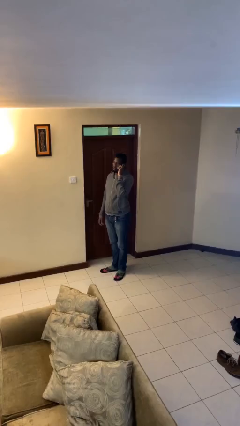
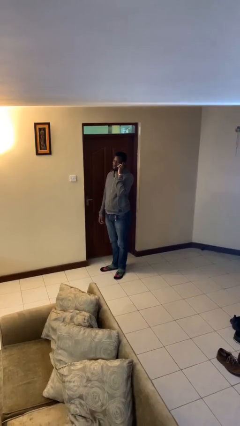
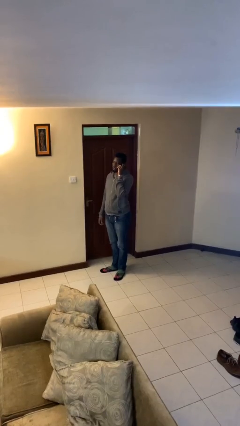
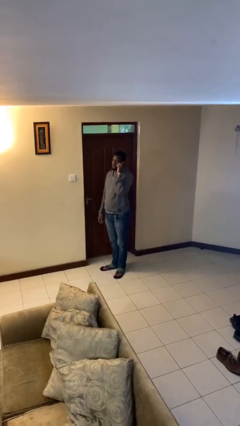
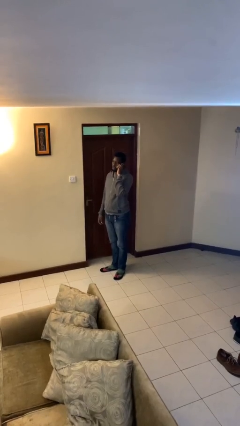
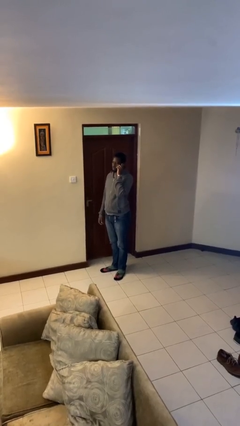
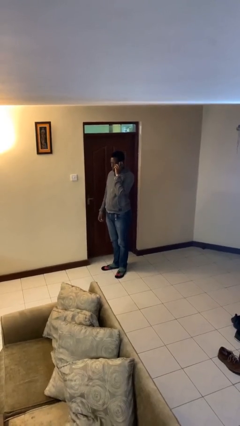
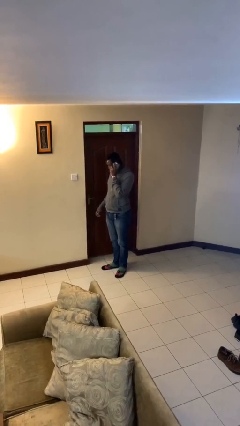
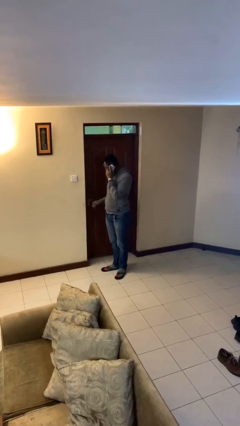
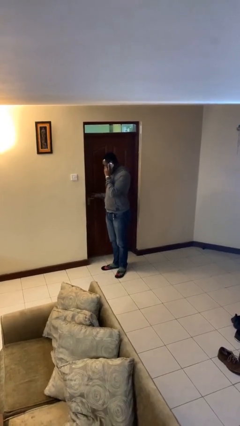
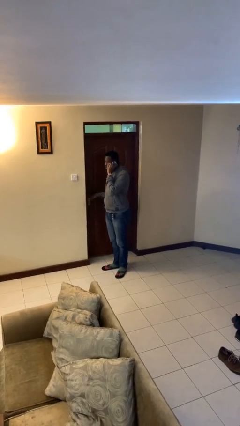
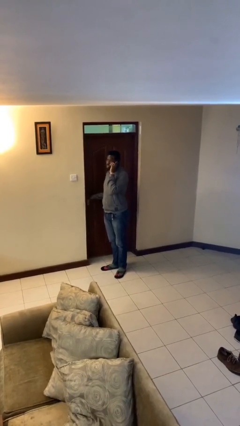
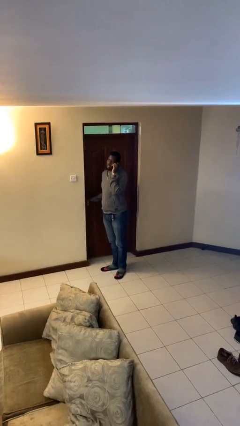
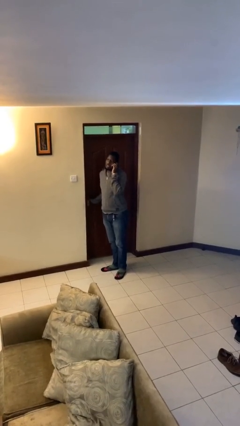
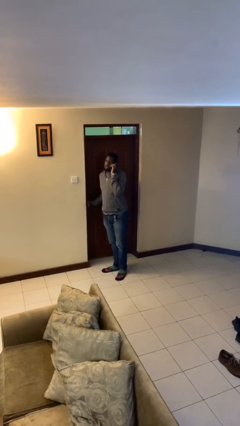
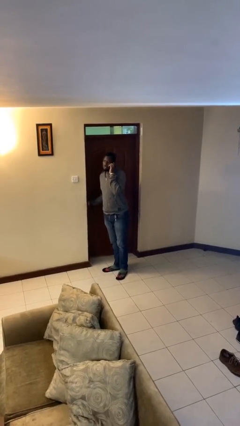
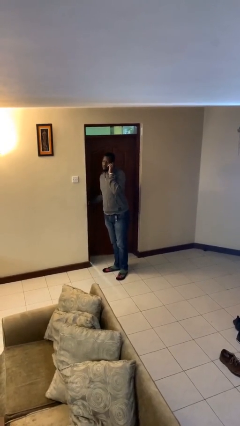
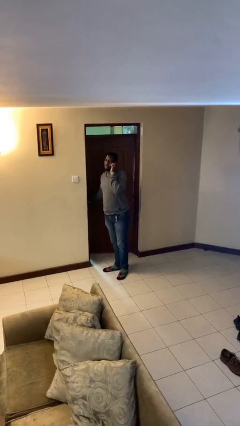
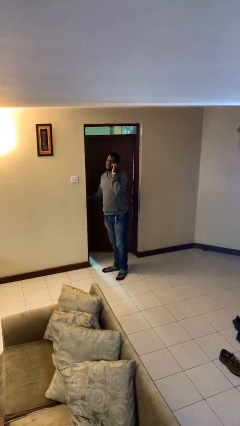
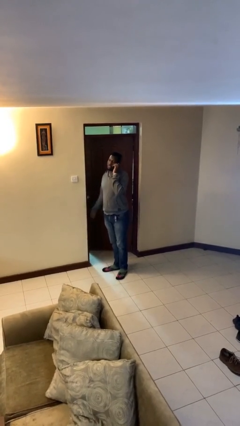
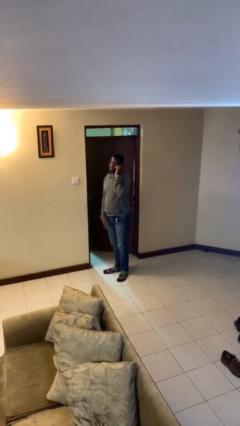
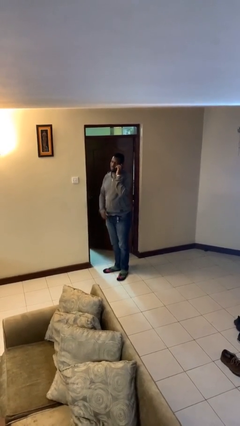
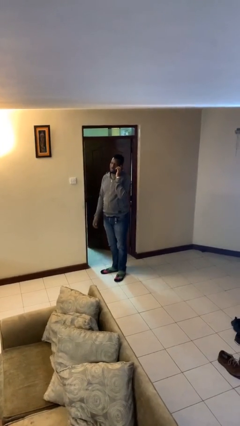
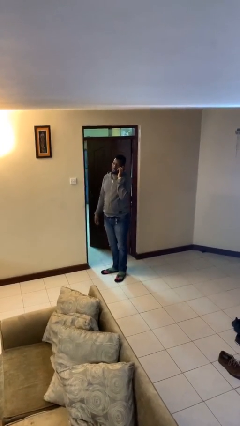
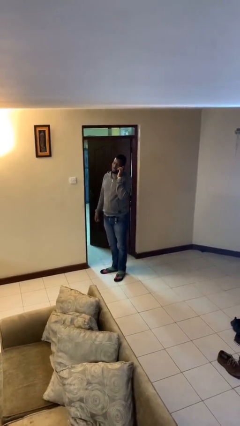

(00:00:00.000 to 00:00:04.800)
person opens facility door

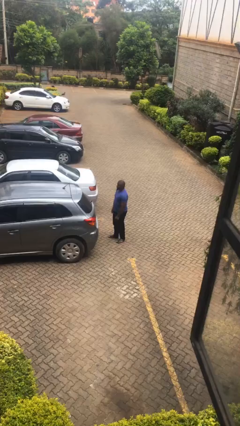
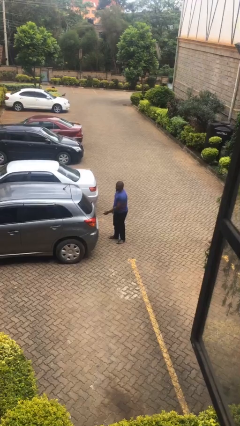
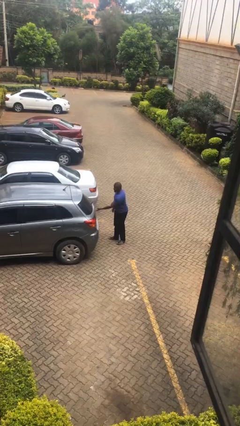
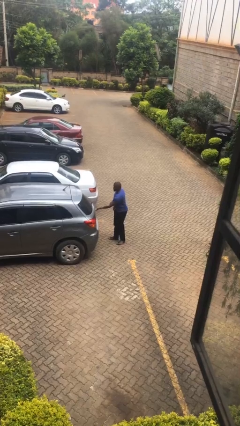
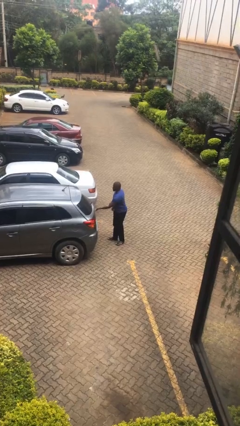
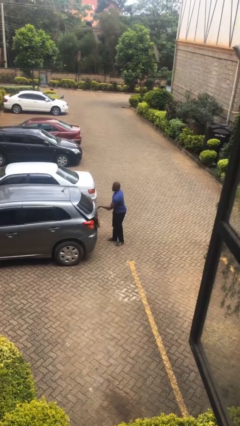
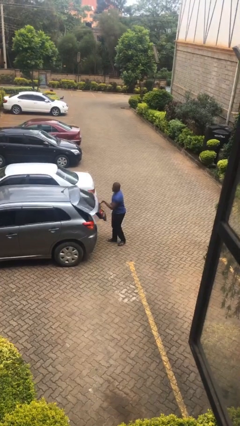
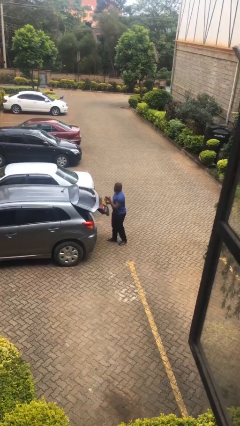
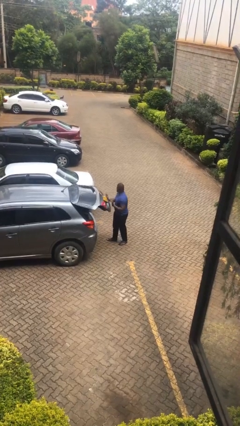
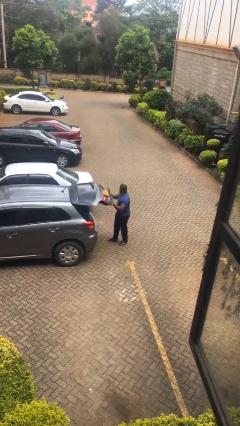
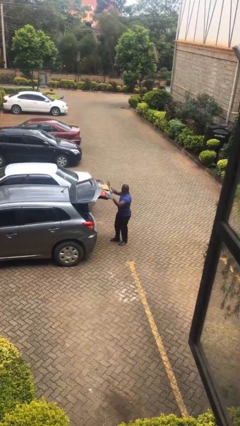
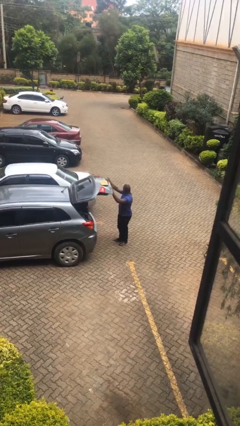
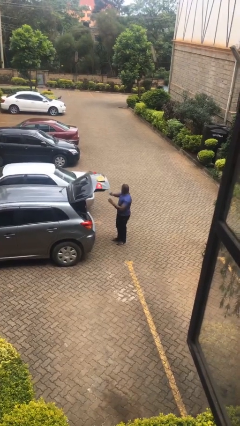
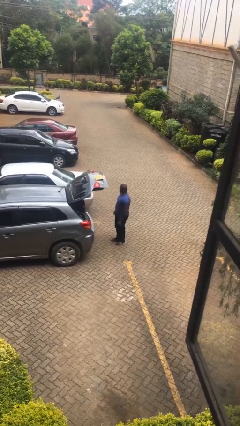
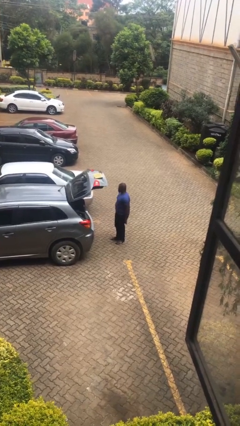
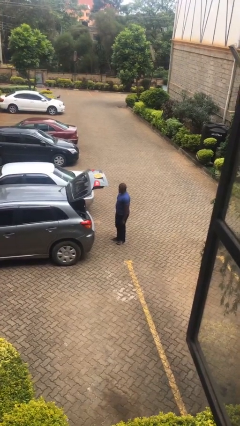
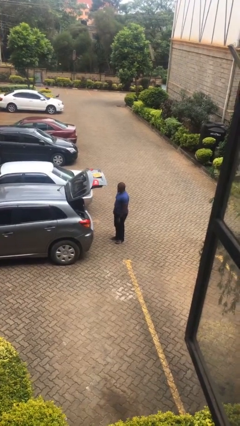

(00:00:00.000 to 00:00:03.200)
person opens car trunk

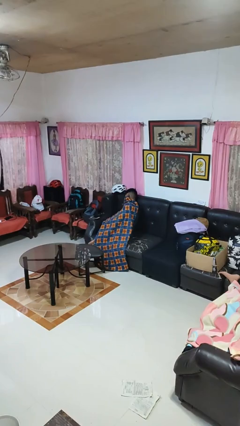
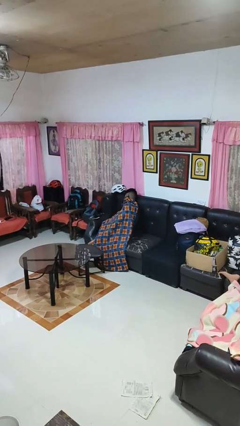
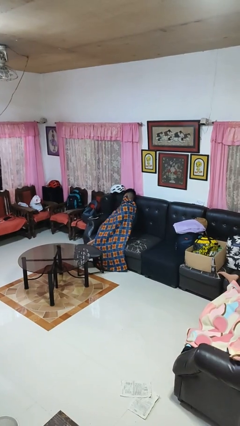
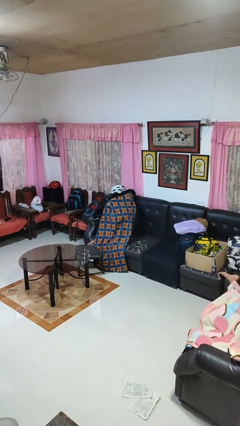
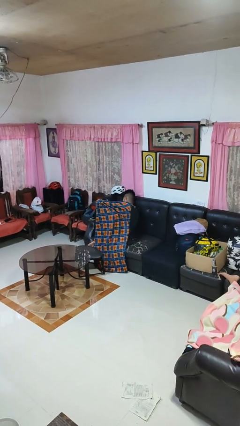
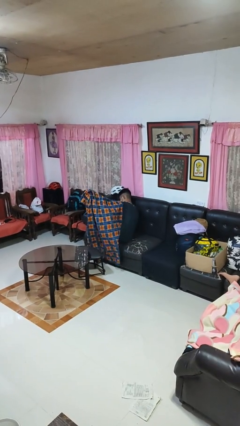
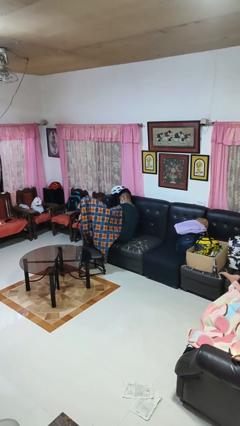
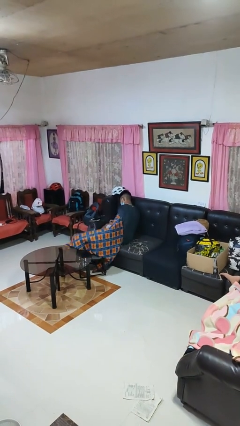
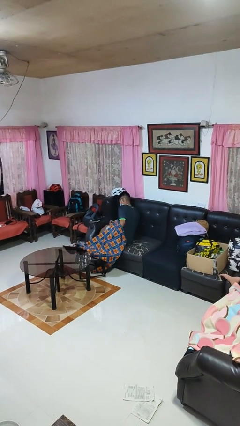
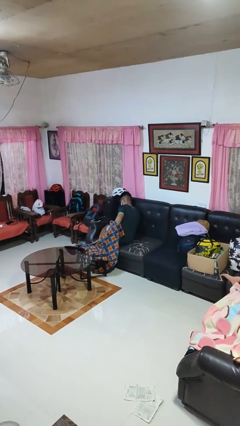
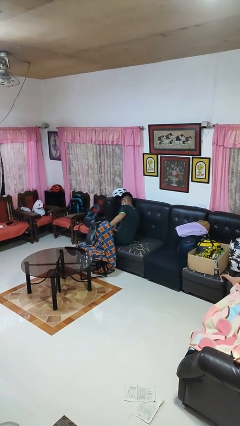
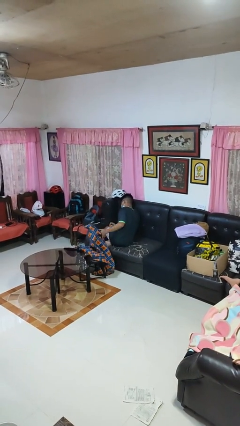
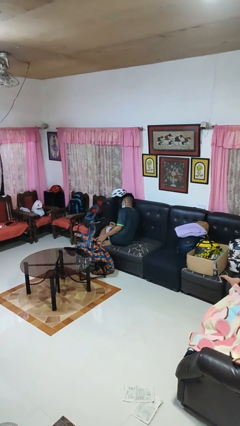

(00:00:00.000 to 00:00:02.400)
person uncovers with blanket

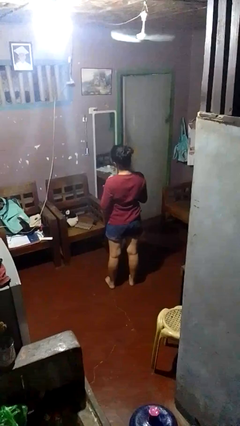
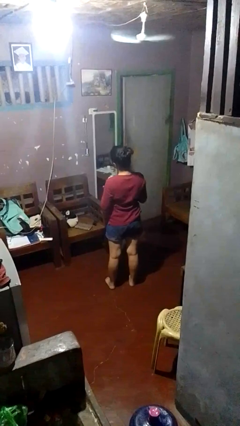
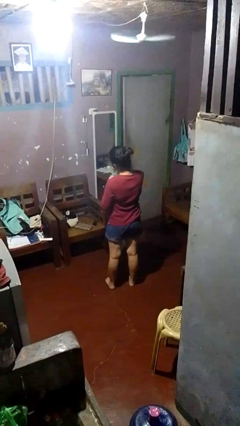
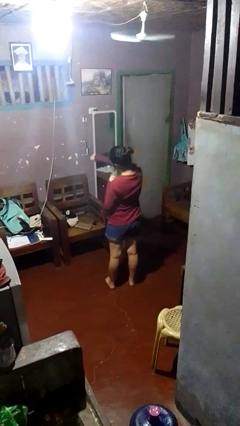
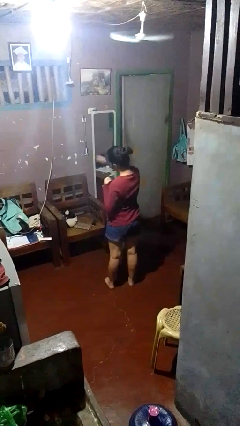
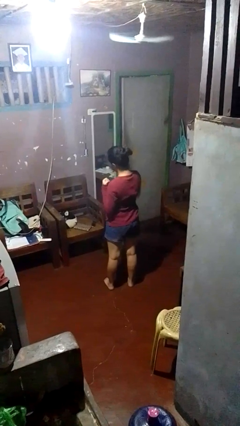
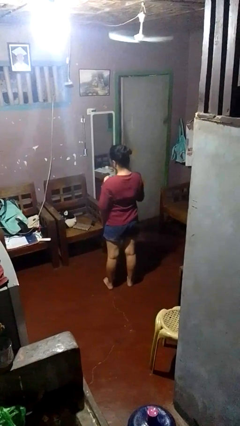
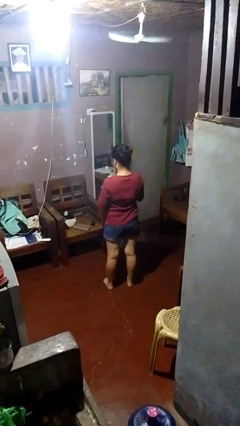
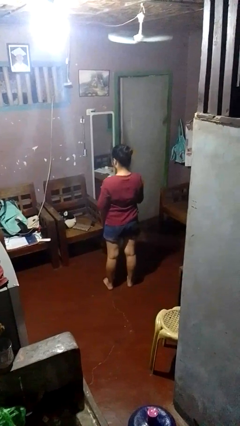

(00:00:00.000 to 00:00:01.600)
person punches

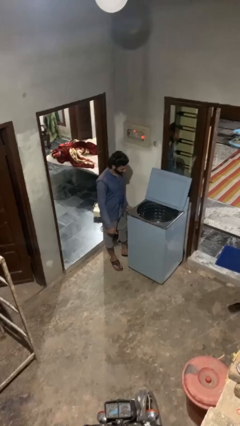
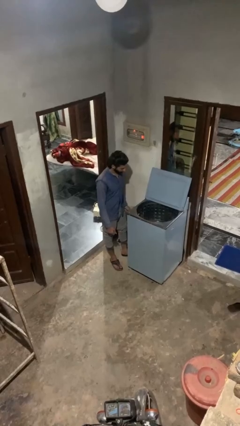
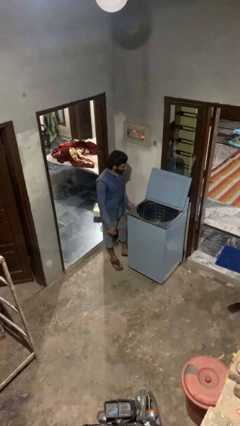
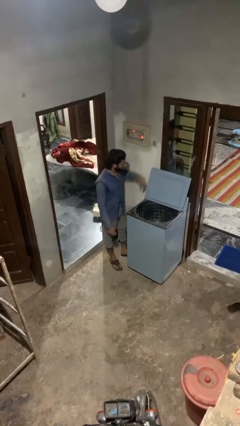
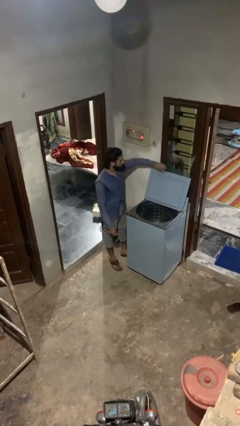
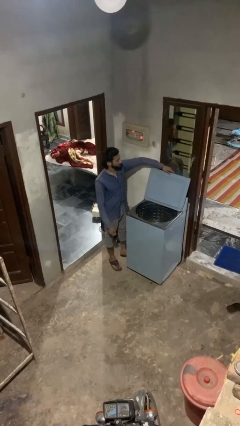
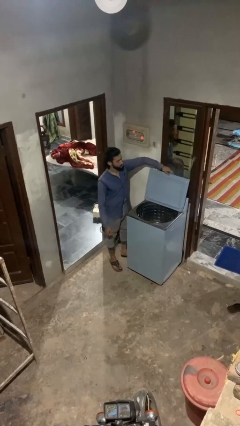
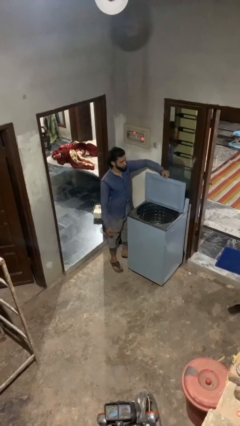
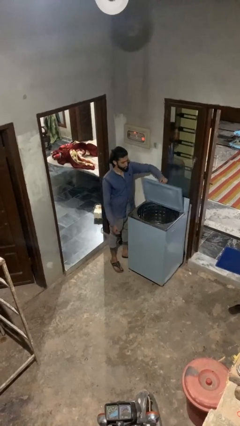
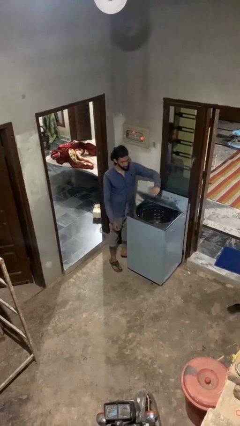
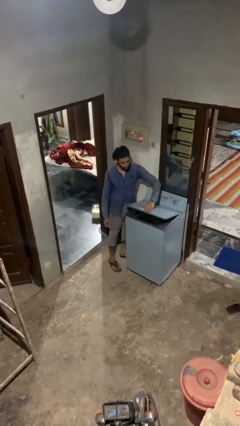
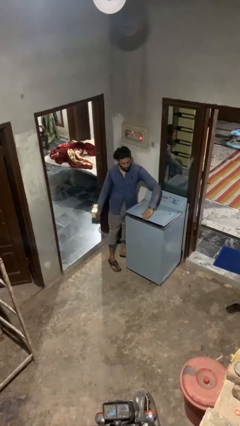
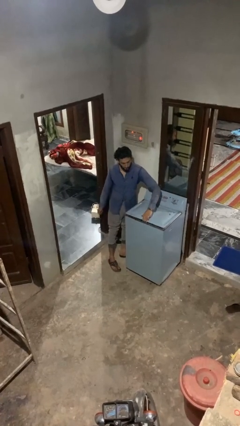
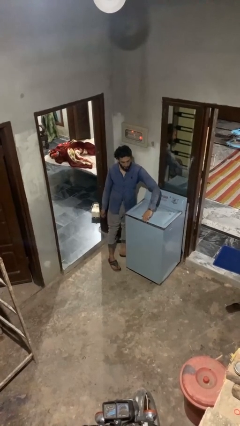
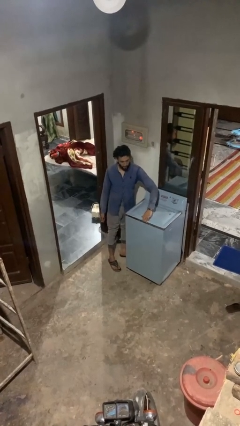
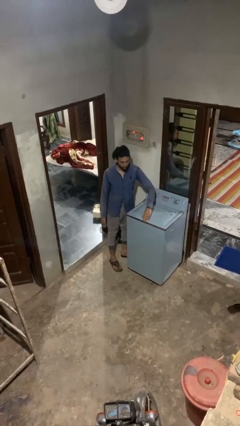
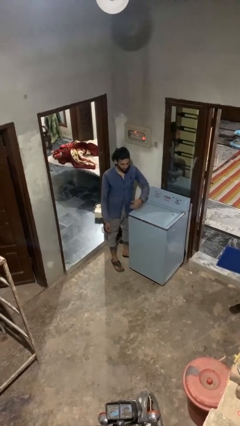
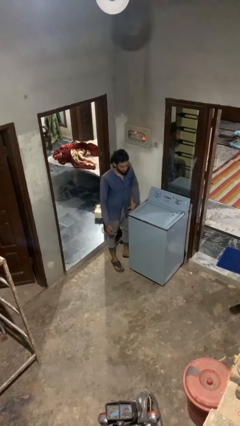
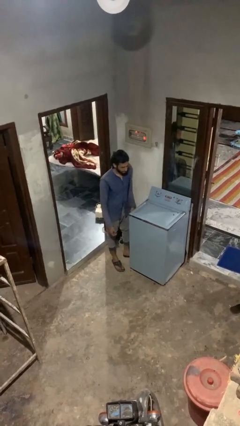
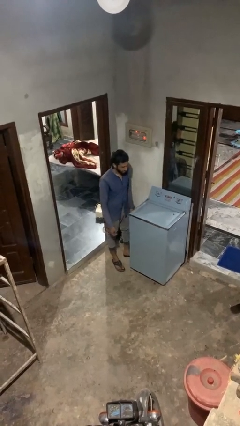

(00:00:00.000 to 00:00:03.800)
person closes clothes washer

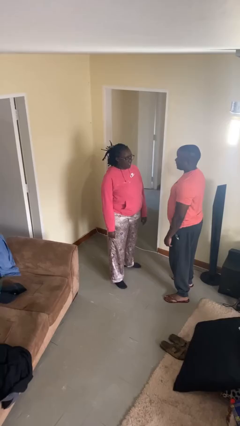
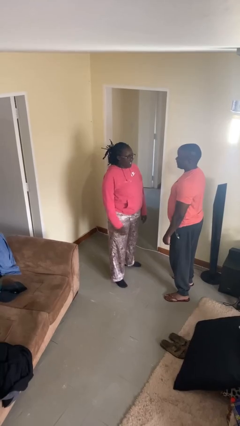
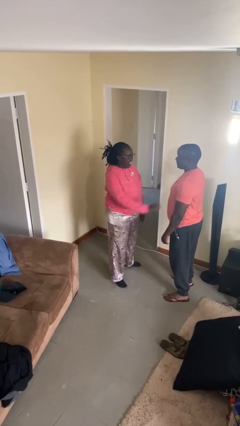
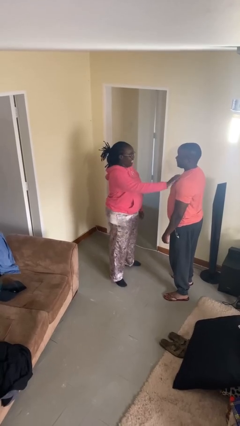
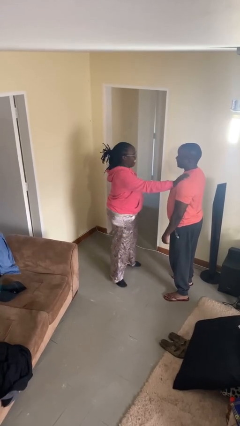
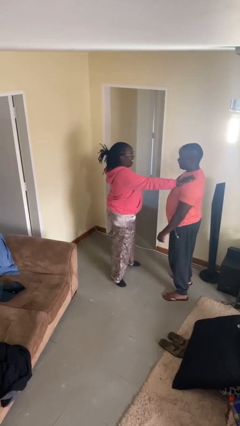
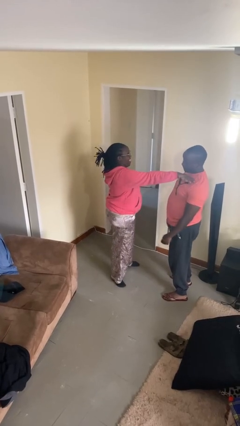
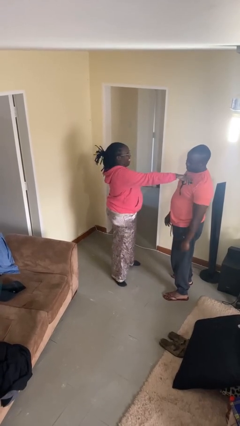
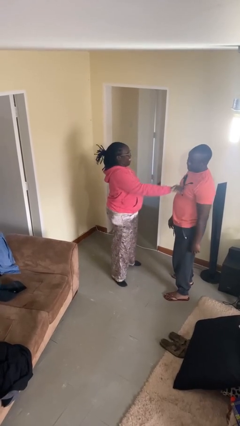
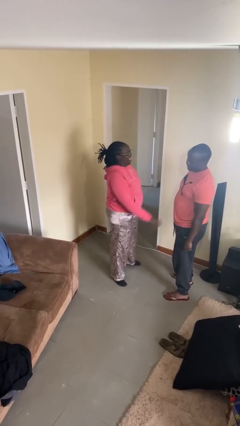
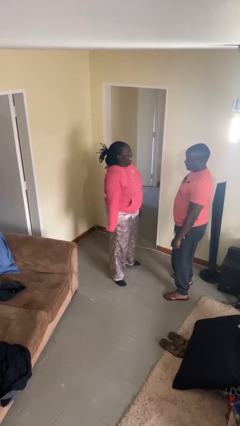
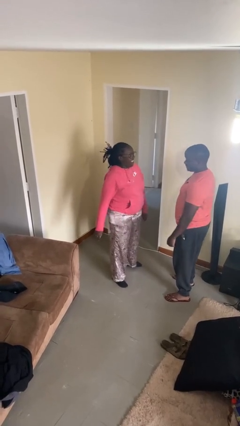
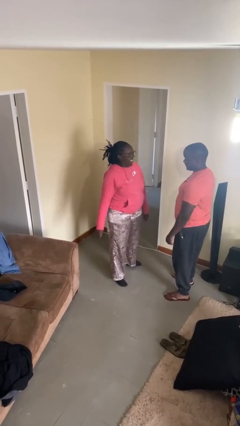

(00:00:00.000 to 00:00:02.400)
person shoves person
